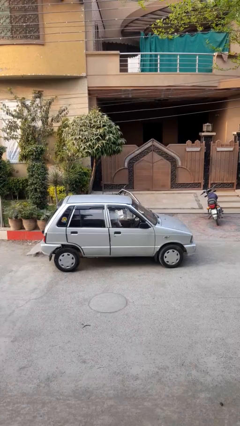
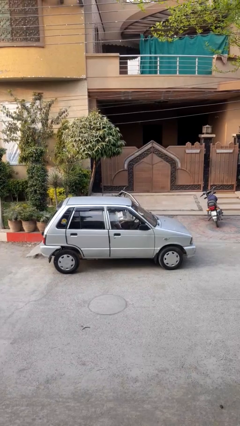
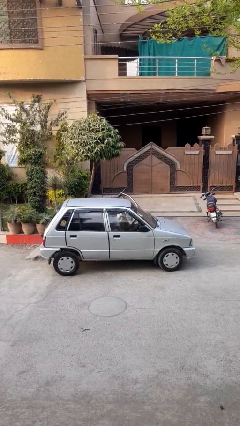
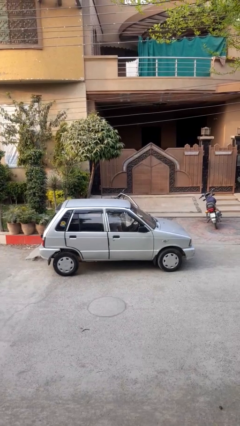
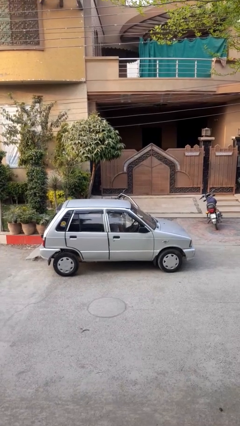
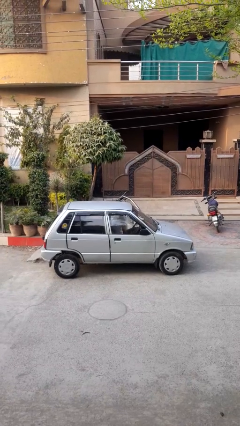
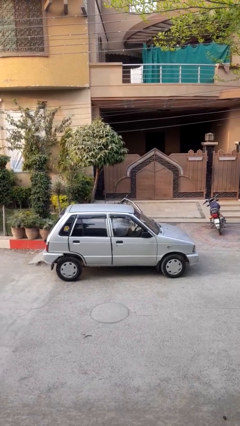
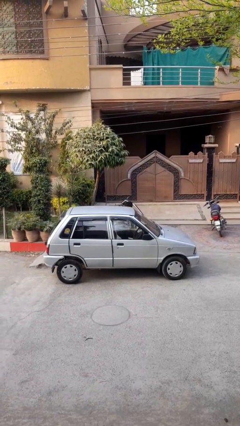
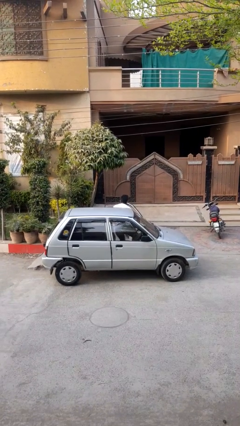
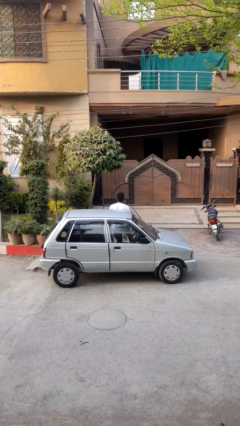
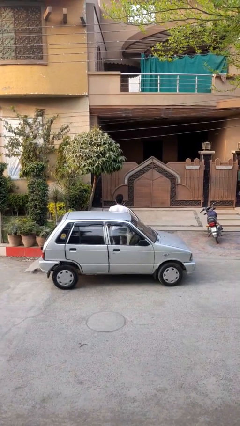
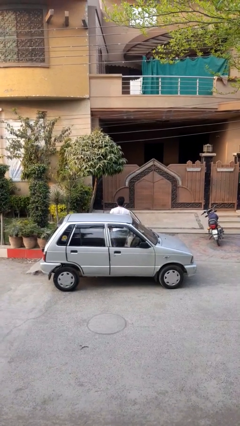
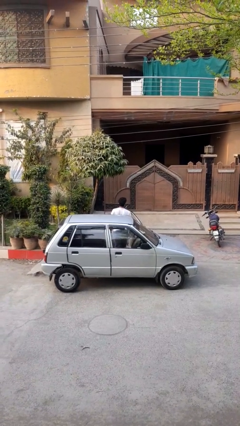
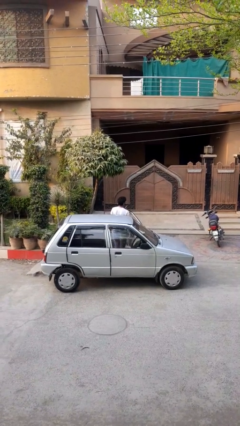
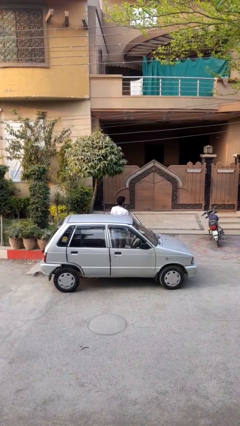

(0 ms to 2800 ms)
person exits car

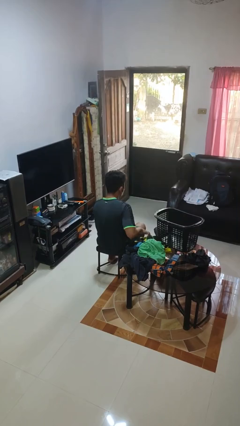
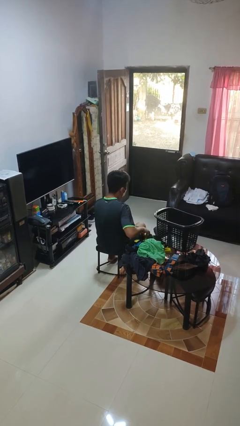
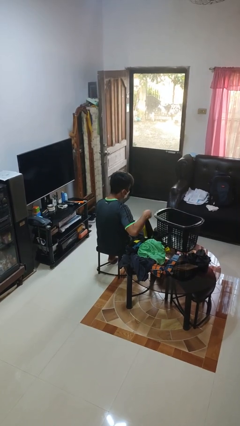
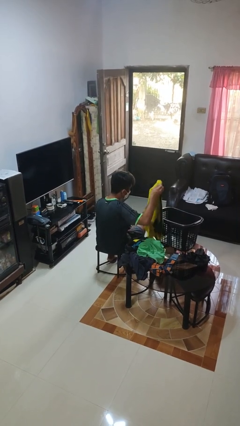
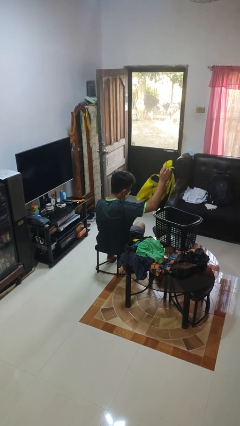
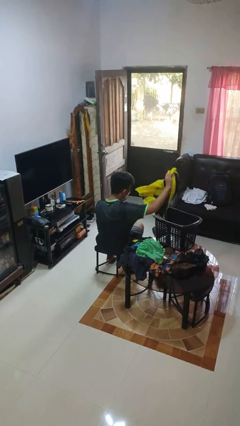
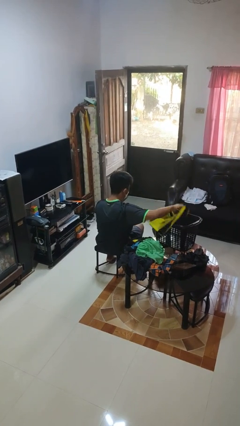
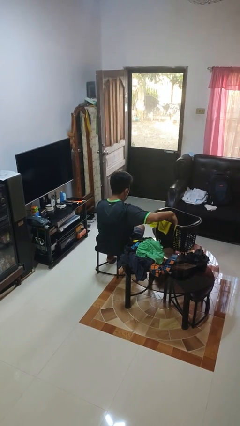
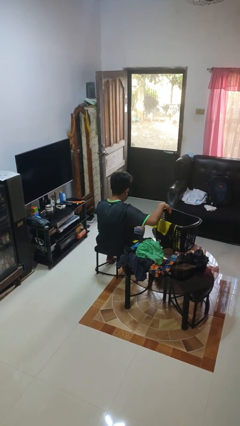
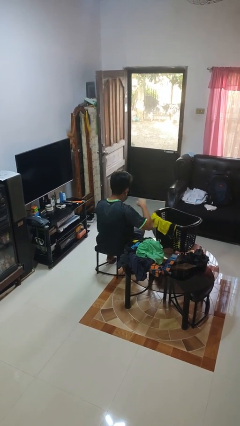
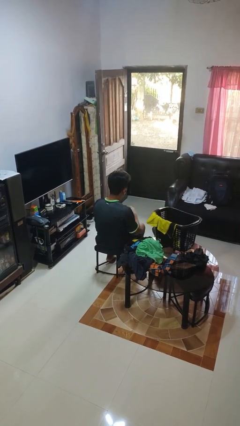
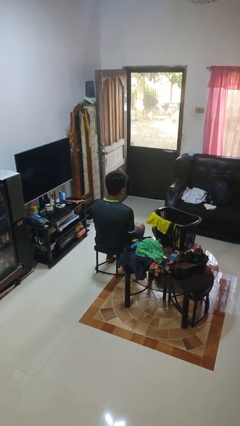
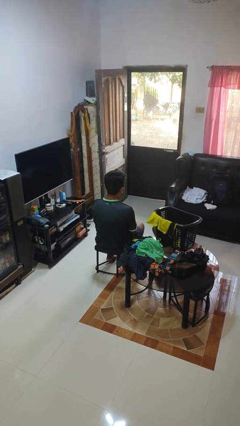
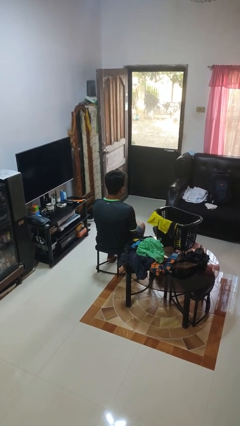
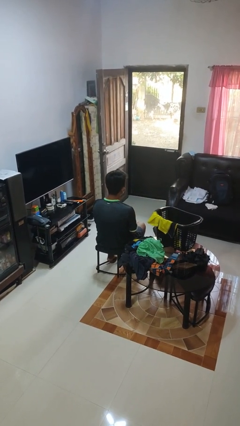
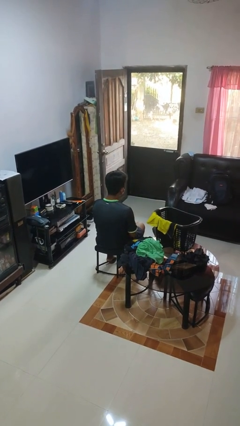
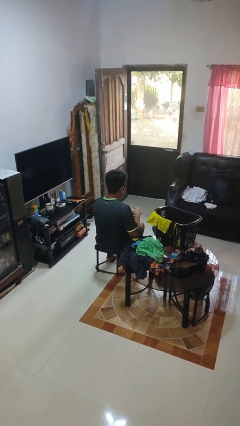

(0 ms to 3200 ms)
person puts object into basket

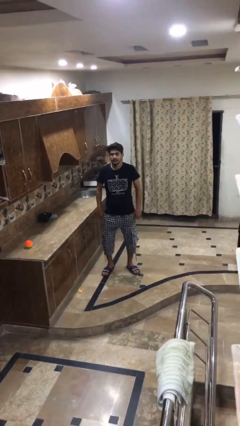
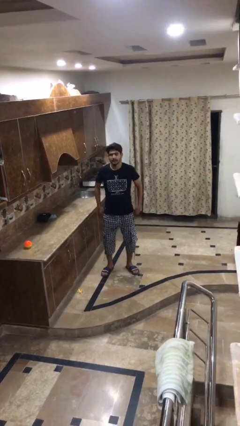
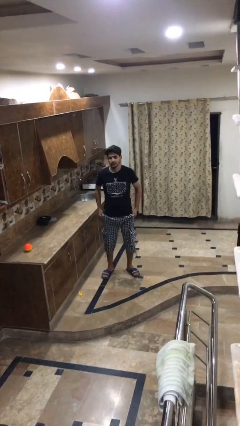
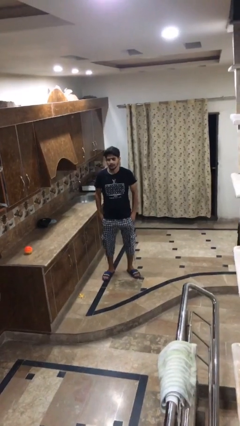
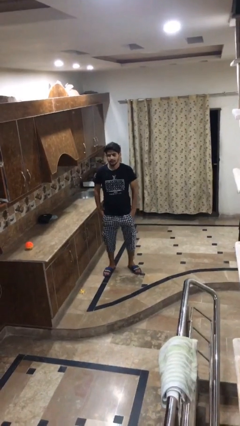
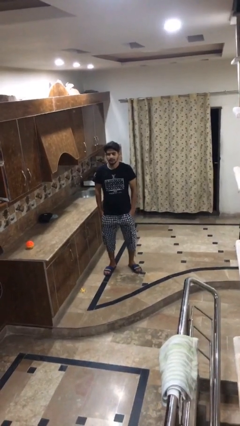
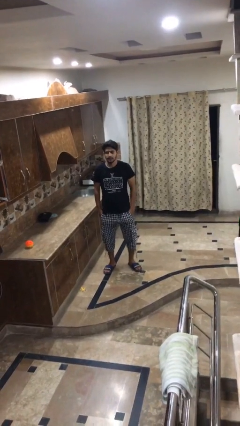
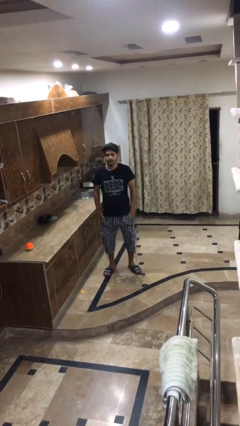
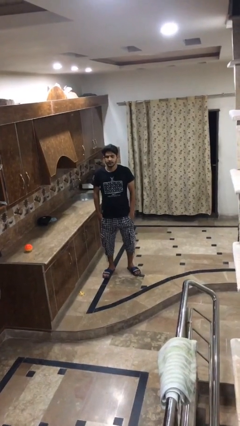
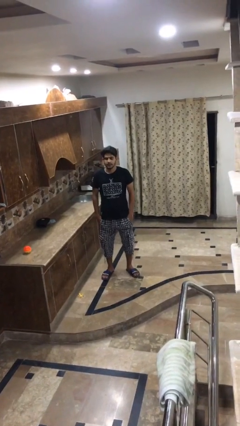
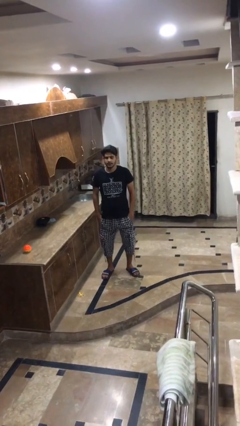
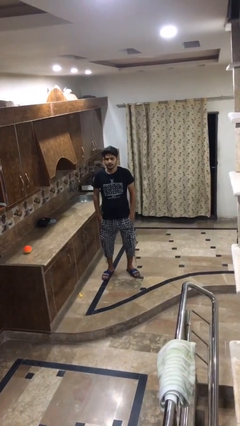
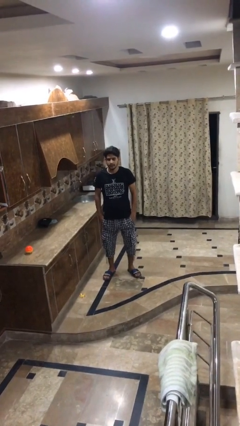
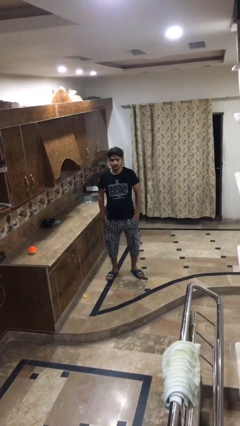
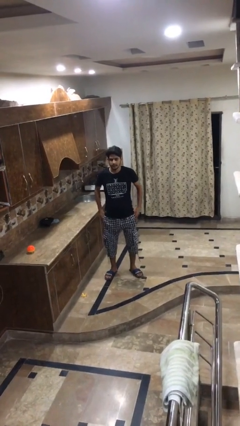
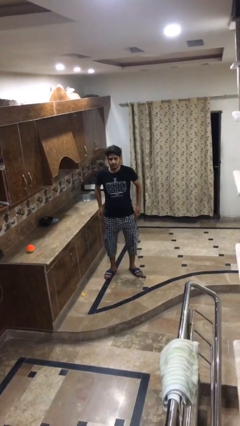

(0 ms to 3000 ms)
person puts hands in back pockets

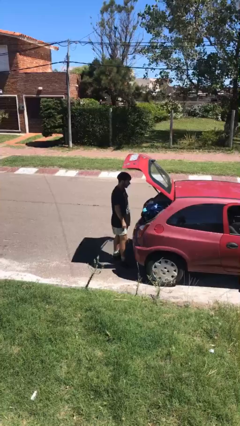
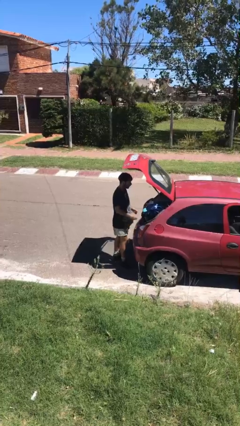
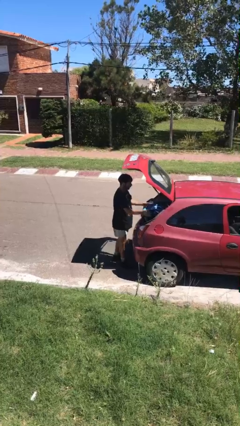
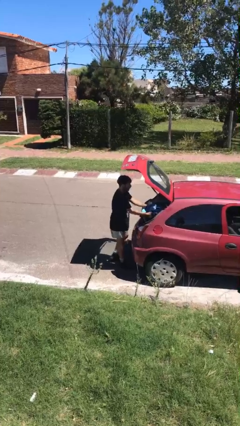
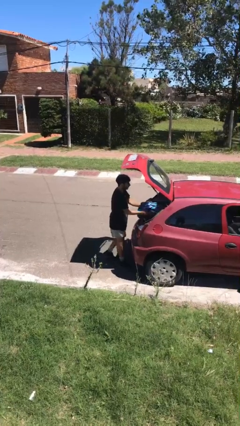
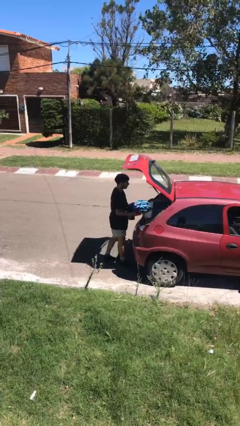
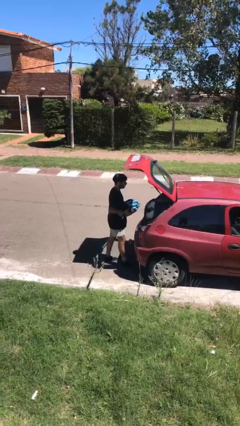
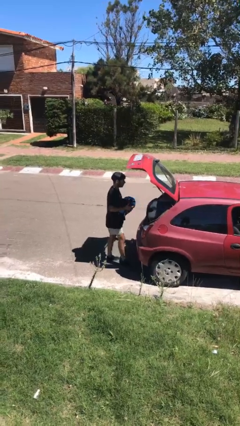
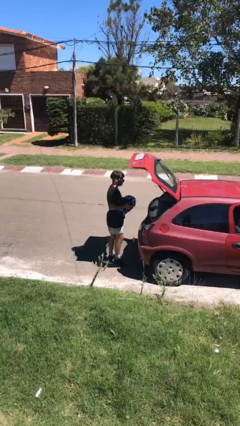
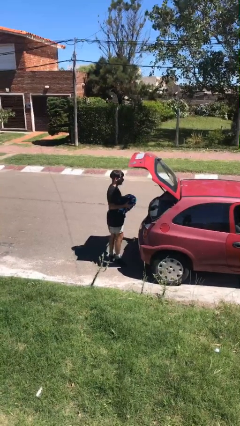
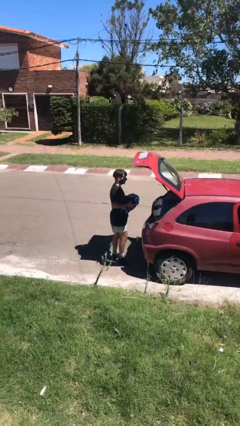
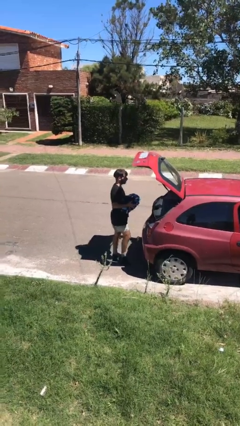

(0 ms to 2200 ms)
person unloads car

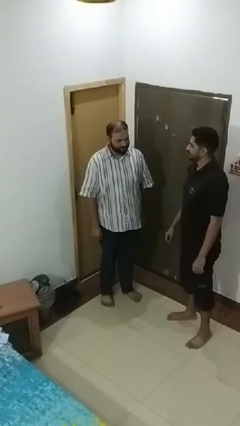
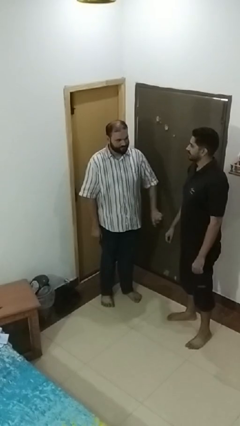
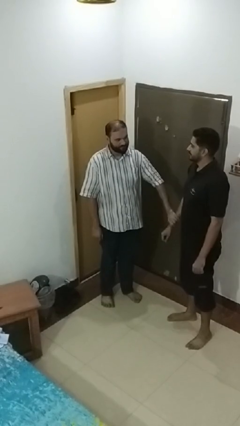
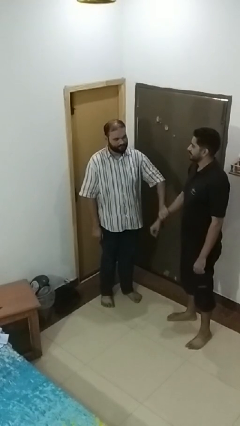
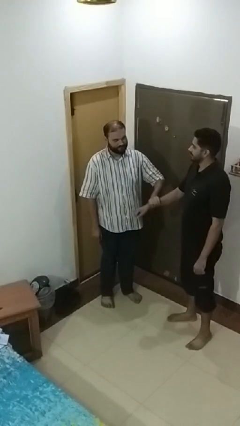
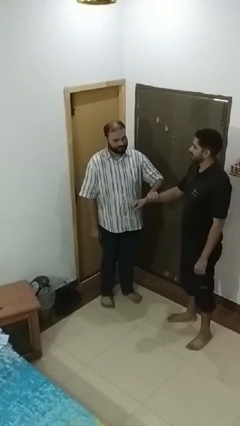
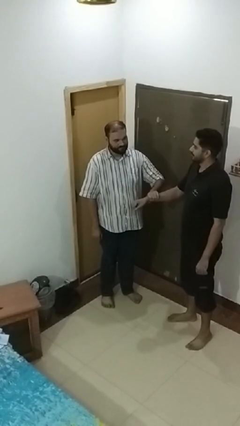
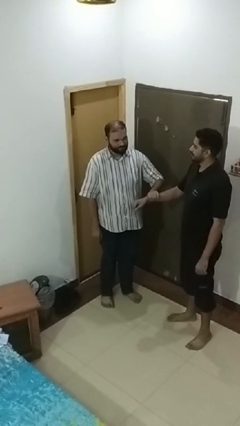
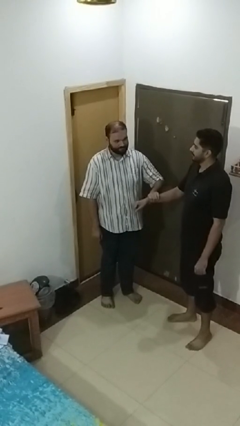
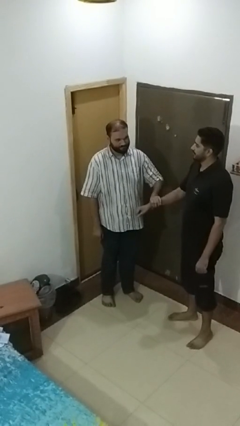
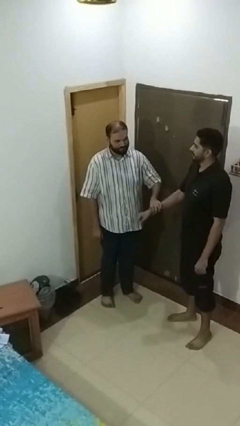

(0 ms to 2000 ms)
person grabs person by forearm

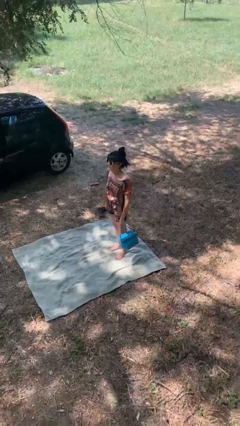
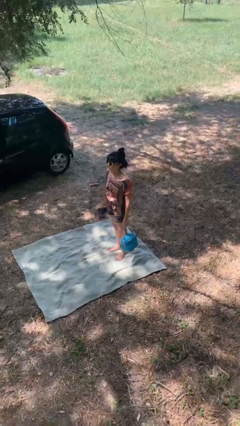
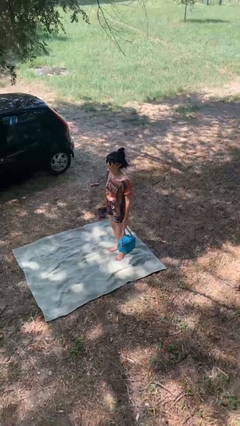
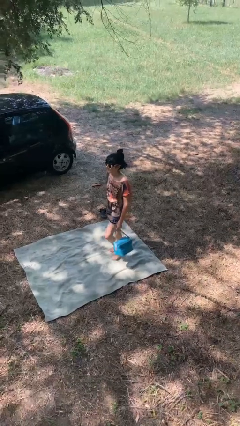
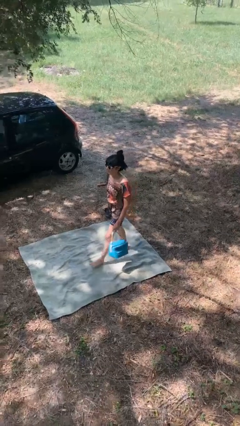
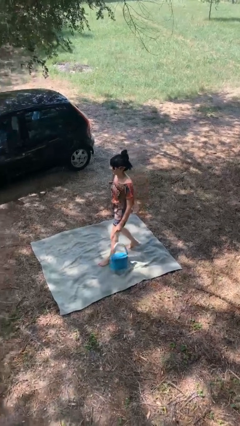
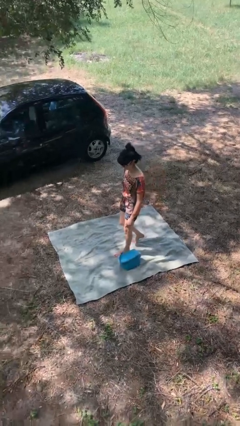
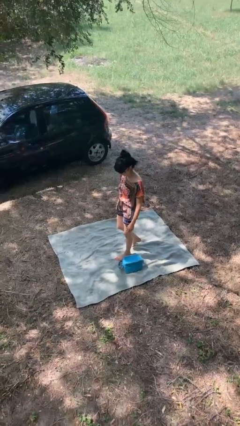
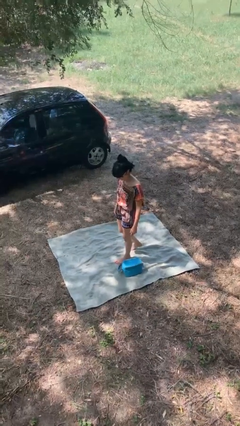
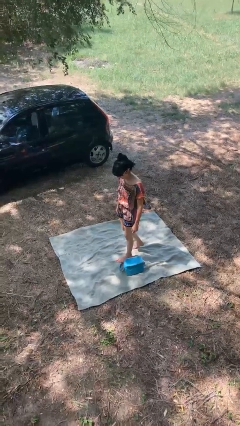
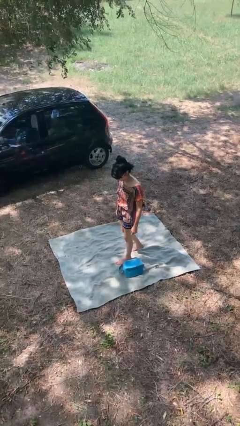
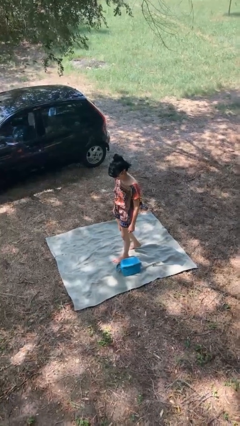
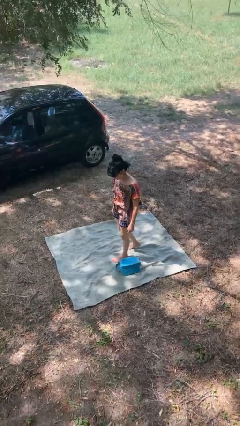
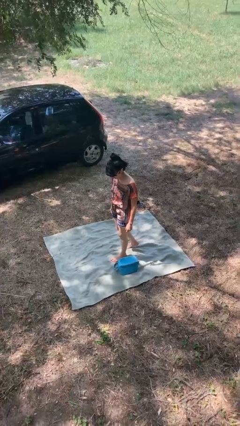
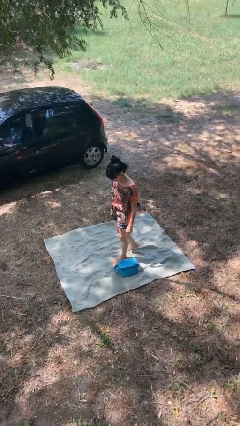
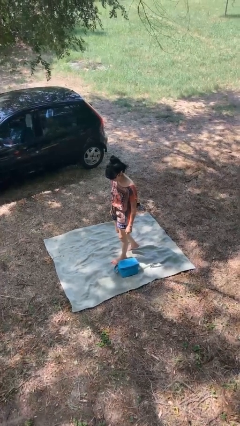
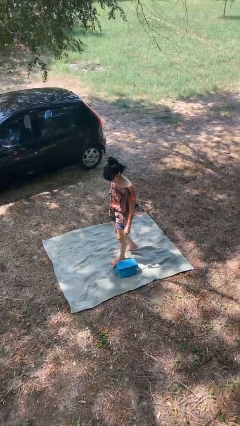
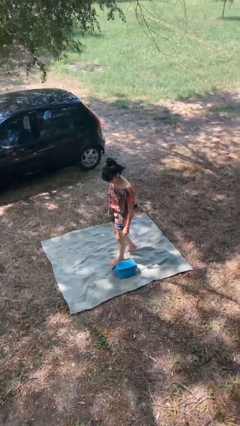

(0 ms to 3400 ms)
person drops object

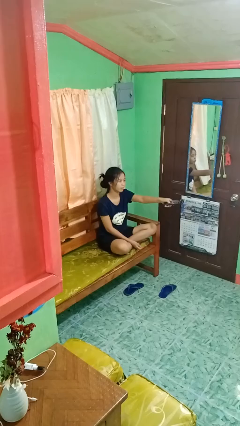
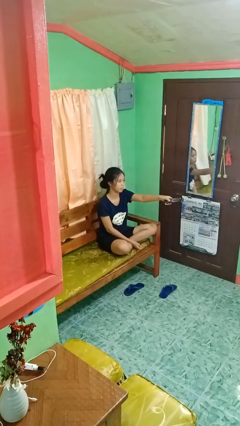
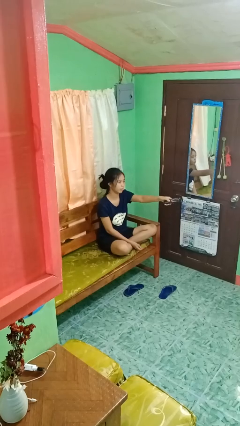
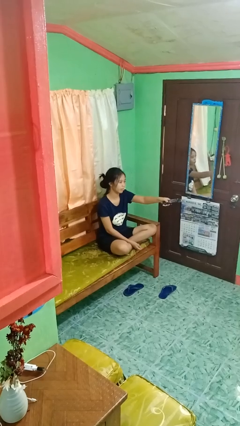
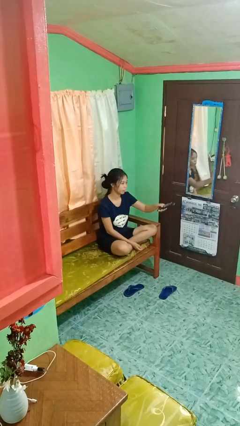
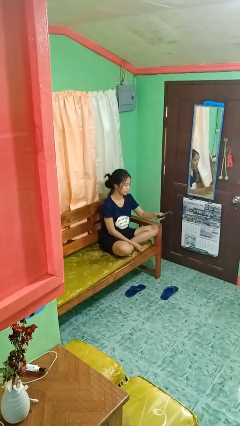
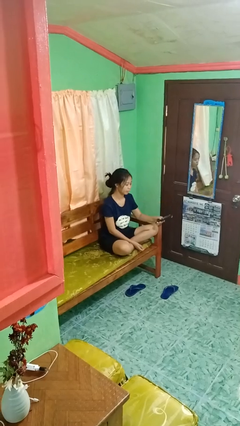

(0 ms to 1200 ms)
person uses television remote
